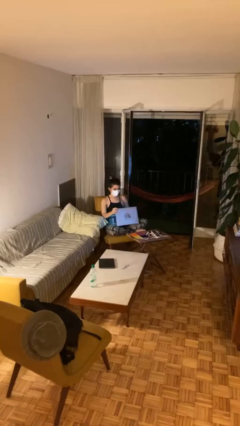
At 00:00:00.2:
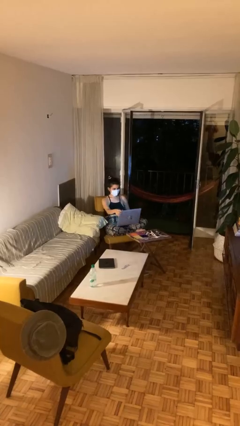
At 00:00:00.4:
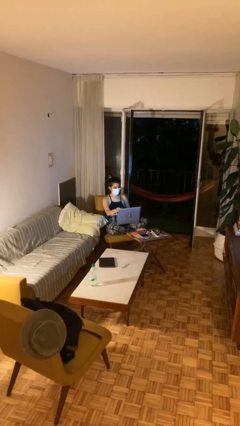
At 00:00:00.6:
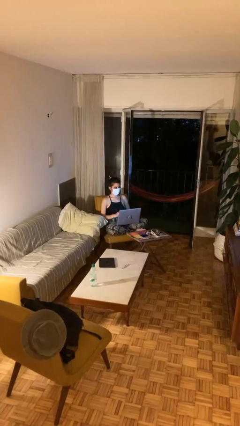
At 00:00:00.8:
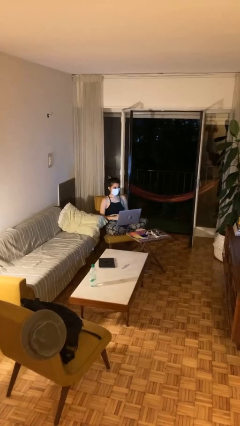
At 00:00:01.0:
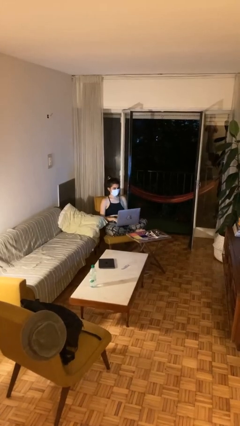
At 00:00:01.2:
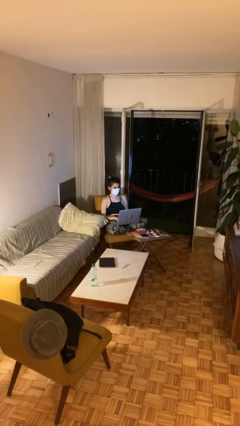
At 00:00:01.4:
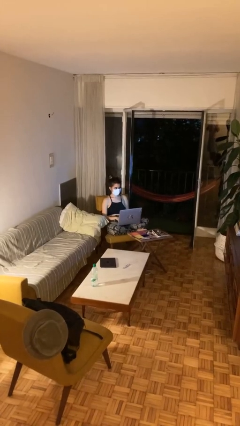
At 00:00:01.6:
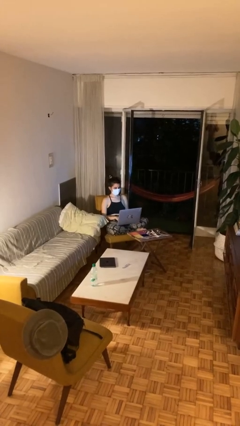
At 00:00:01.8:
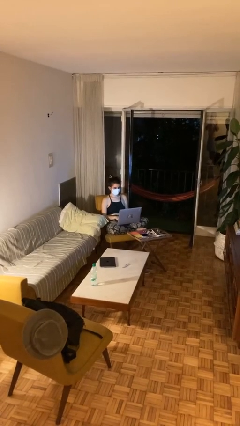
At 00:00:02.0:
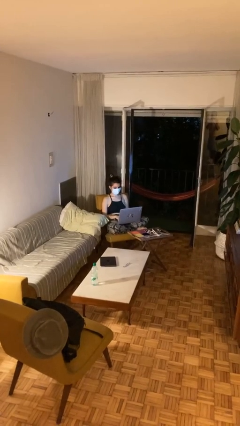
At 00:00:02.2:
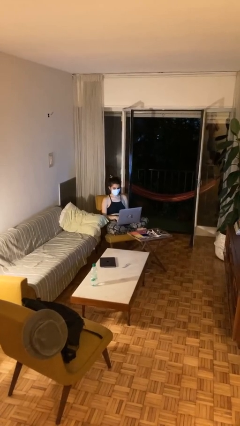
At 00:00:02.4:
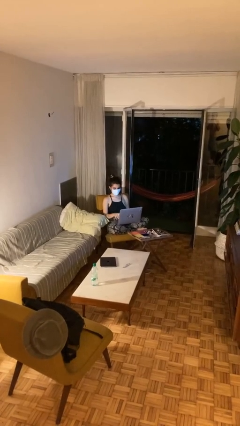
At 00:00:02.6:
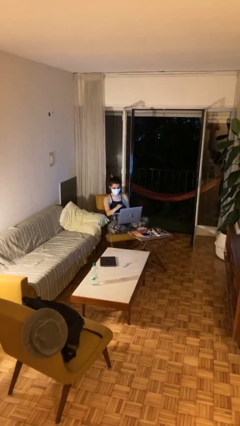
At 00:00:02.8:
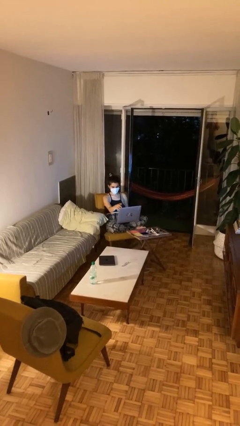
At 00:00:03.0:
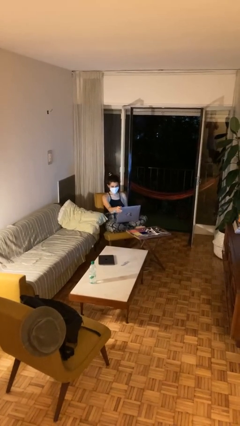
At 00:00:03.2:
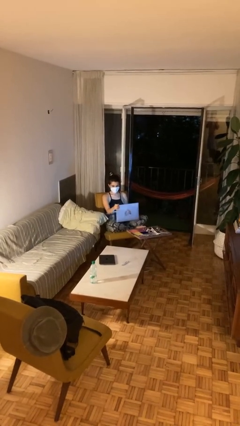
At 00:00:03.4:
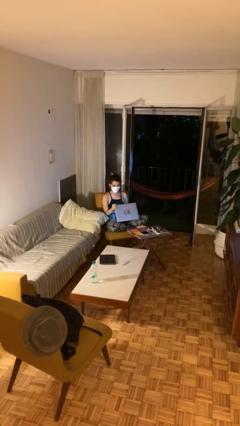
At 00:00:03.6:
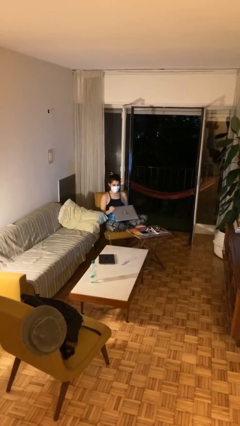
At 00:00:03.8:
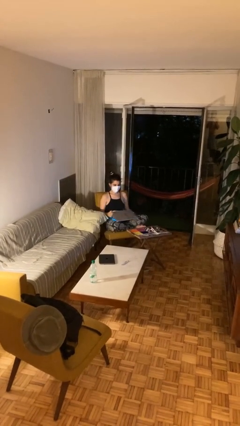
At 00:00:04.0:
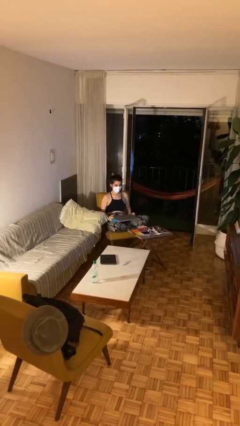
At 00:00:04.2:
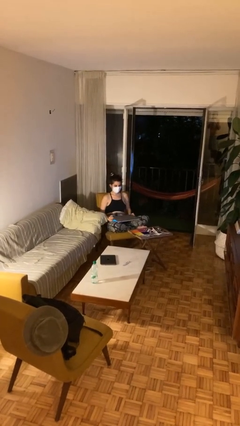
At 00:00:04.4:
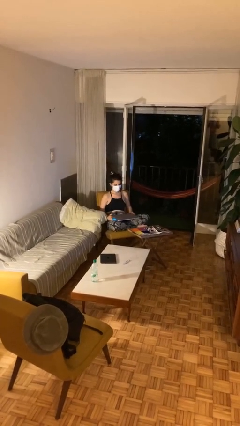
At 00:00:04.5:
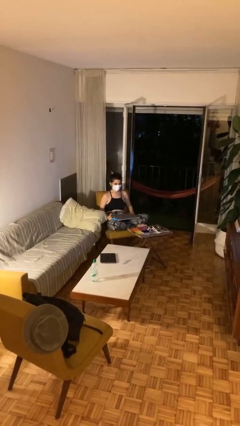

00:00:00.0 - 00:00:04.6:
person interacts with laptop

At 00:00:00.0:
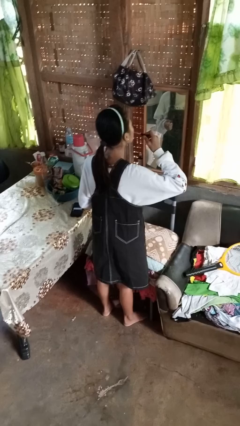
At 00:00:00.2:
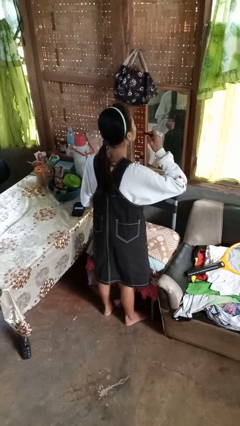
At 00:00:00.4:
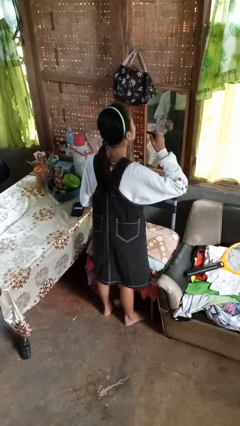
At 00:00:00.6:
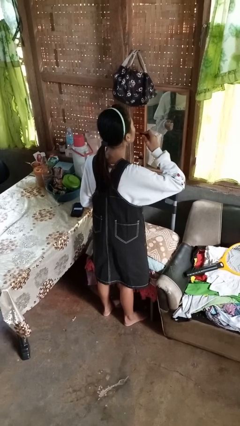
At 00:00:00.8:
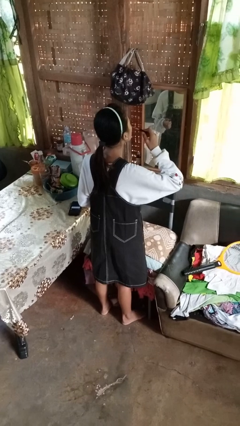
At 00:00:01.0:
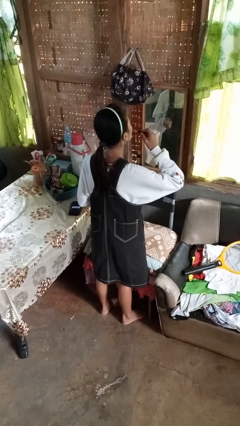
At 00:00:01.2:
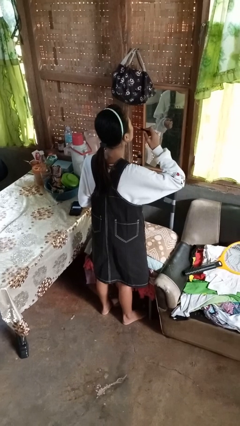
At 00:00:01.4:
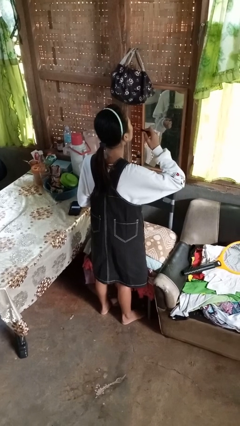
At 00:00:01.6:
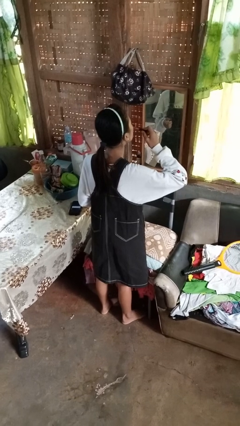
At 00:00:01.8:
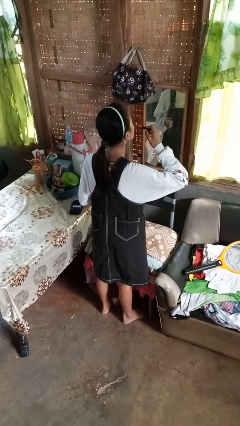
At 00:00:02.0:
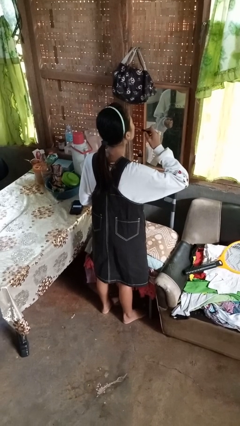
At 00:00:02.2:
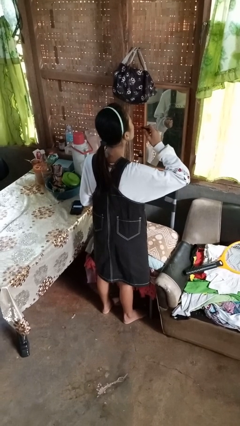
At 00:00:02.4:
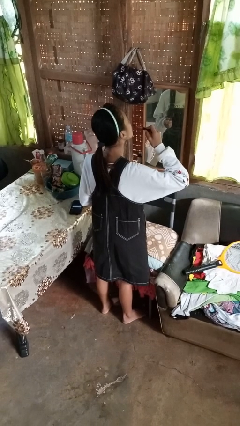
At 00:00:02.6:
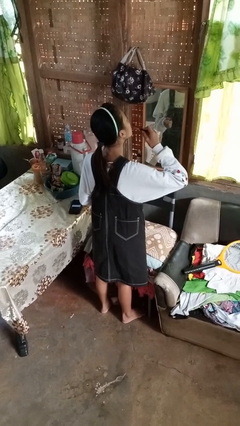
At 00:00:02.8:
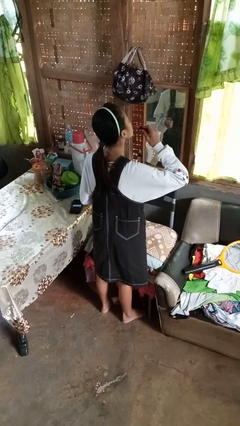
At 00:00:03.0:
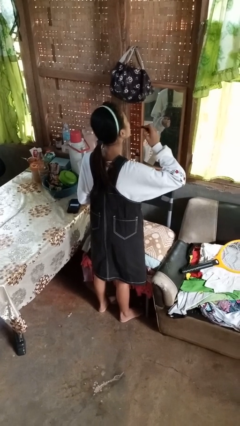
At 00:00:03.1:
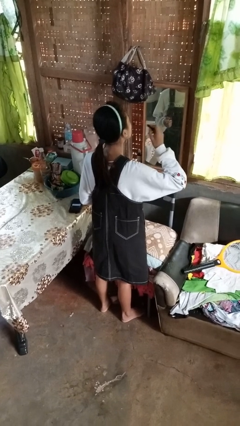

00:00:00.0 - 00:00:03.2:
person applies lip makeup

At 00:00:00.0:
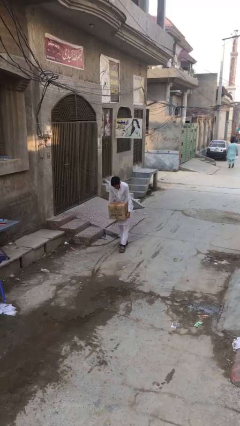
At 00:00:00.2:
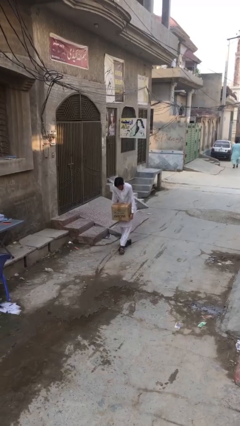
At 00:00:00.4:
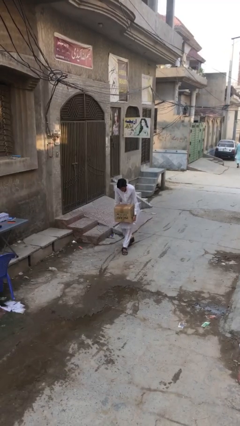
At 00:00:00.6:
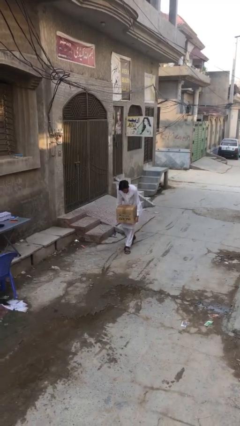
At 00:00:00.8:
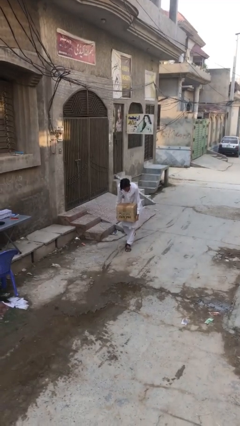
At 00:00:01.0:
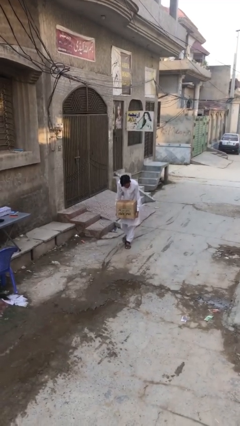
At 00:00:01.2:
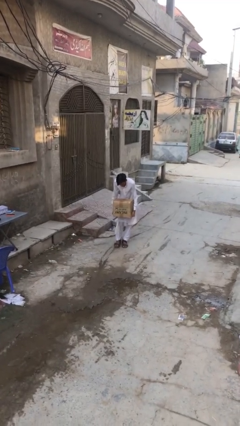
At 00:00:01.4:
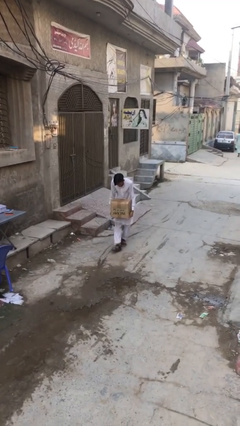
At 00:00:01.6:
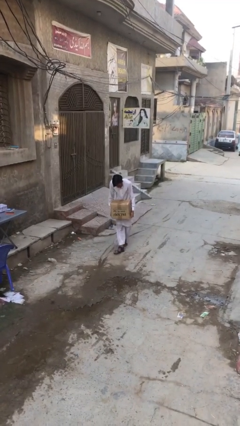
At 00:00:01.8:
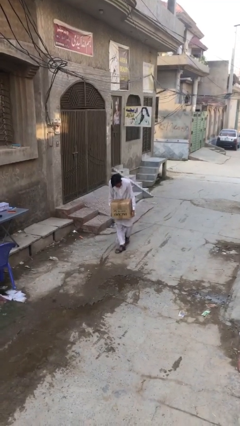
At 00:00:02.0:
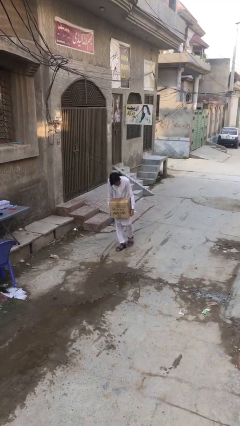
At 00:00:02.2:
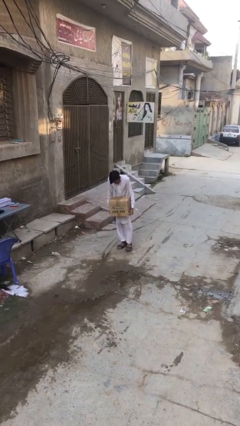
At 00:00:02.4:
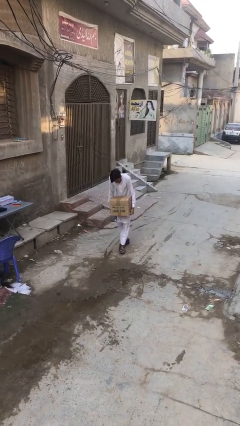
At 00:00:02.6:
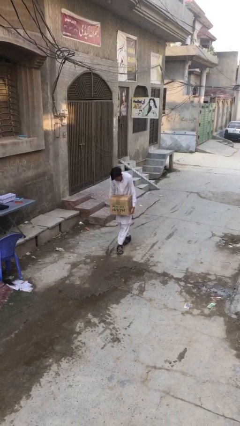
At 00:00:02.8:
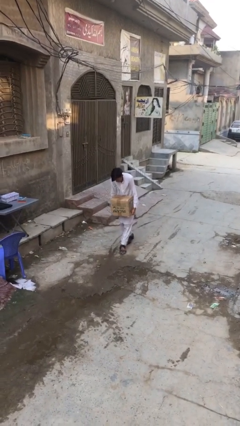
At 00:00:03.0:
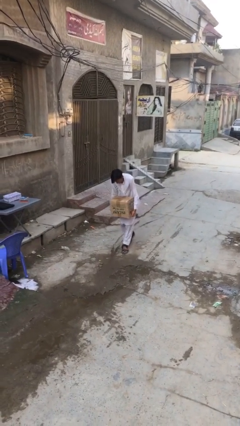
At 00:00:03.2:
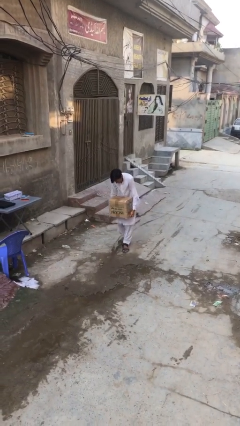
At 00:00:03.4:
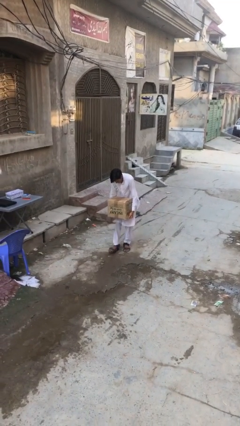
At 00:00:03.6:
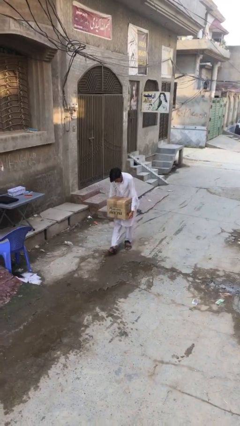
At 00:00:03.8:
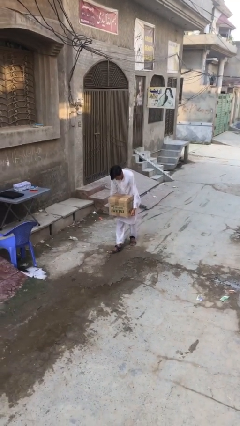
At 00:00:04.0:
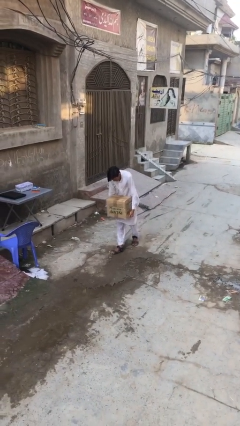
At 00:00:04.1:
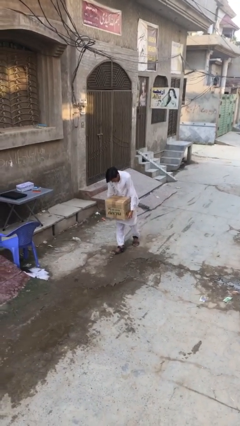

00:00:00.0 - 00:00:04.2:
person carries heavy object

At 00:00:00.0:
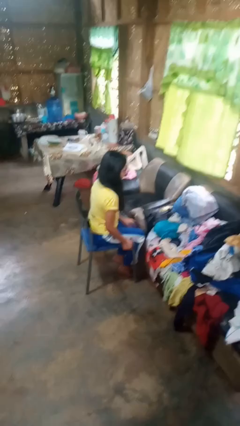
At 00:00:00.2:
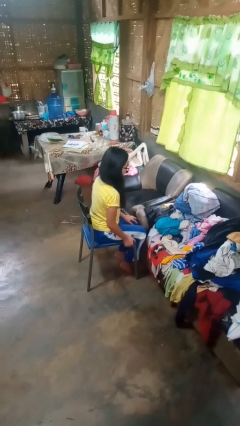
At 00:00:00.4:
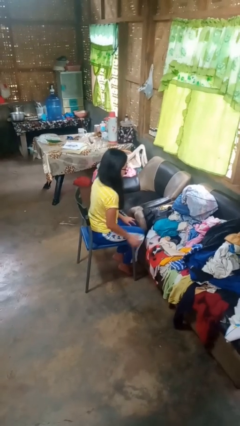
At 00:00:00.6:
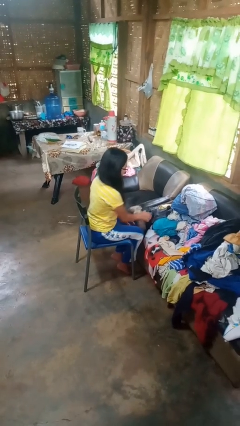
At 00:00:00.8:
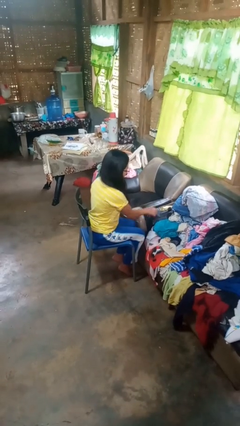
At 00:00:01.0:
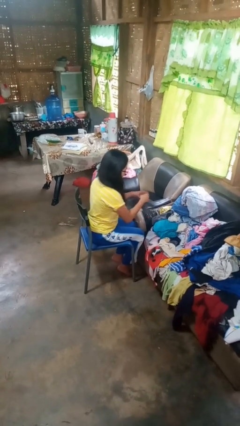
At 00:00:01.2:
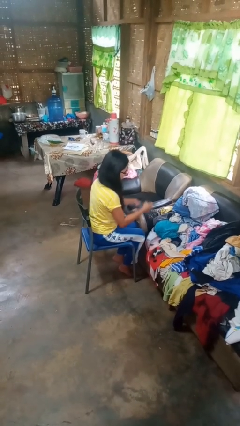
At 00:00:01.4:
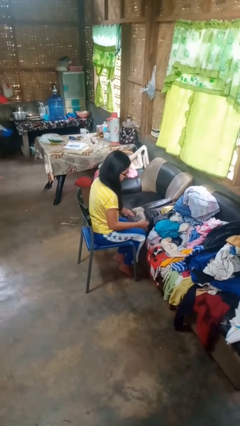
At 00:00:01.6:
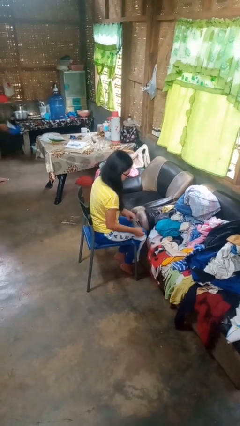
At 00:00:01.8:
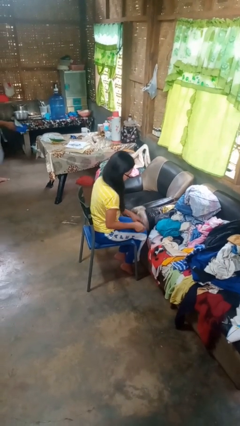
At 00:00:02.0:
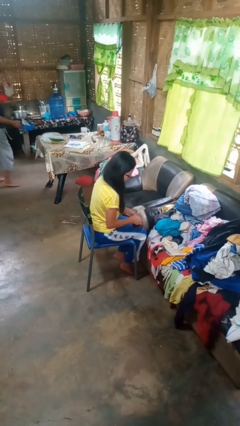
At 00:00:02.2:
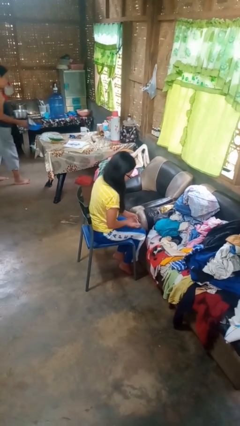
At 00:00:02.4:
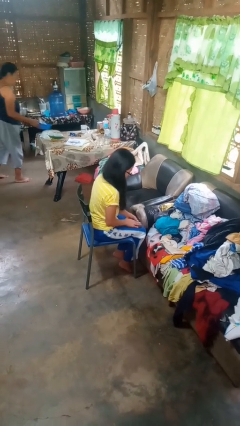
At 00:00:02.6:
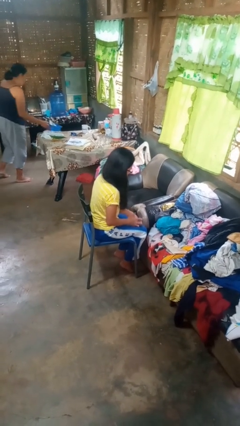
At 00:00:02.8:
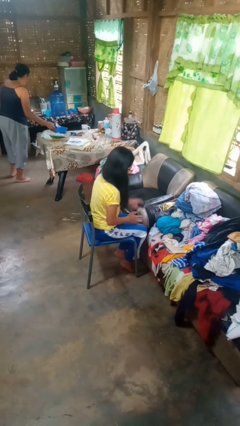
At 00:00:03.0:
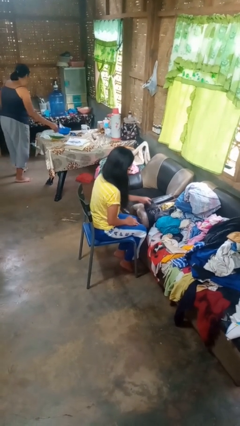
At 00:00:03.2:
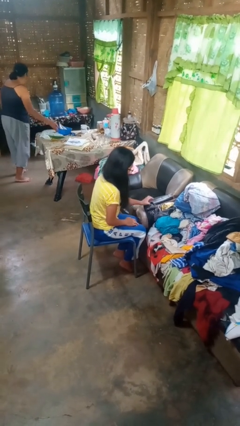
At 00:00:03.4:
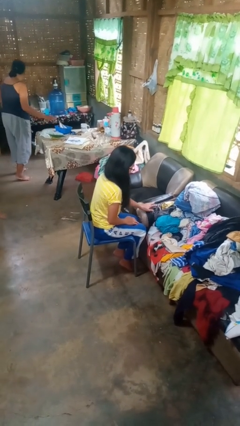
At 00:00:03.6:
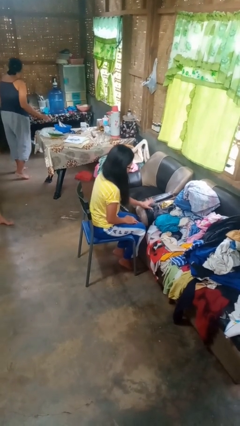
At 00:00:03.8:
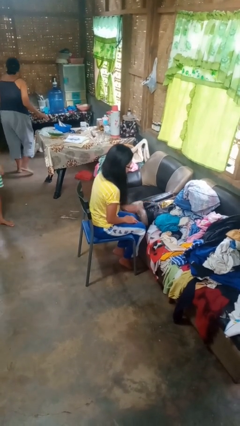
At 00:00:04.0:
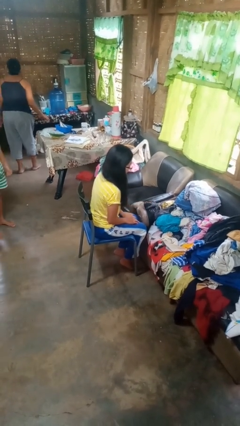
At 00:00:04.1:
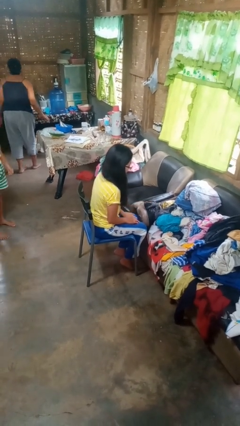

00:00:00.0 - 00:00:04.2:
person folds socks

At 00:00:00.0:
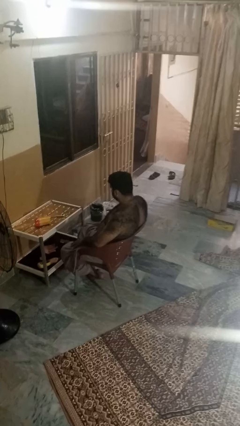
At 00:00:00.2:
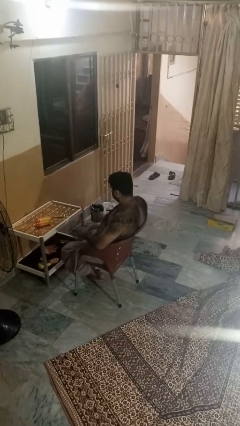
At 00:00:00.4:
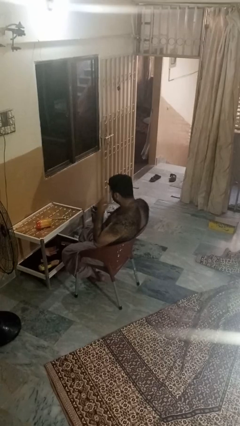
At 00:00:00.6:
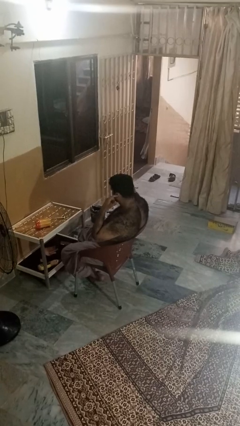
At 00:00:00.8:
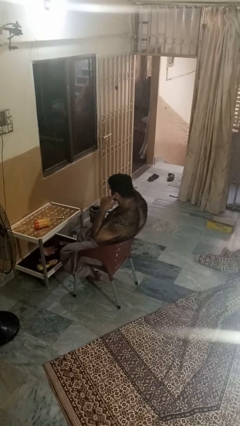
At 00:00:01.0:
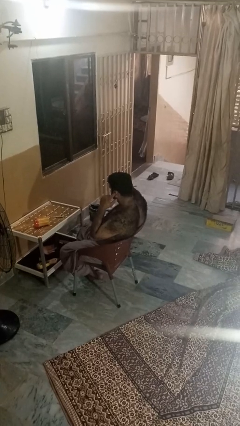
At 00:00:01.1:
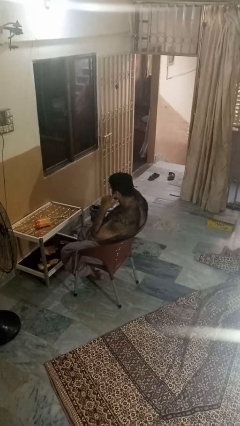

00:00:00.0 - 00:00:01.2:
person puts fingers in ear
